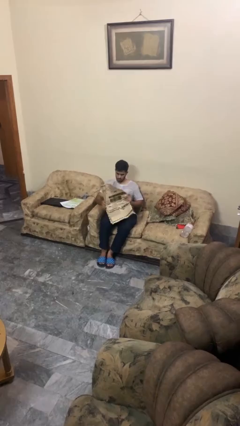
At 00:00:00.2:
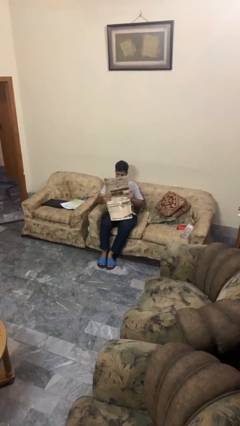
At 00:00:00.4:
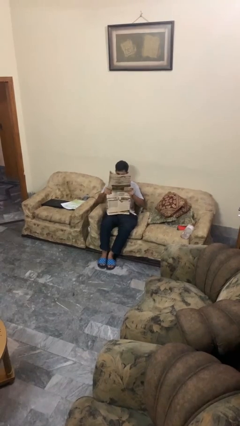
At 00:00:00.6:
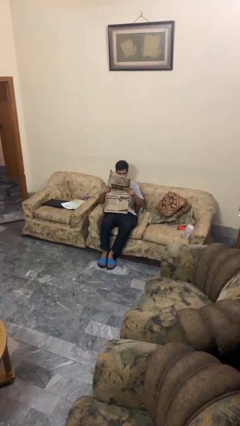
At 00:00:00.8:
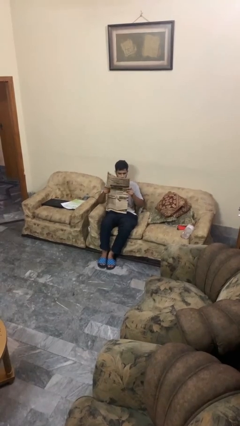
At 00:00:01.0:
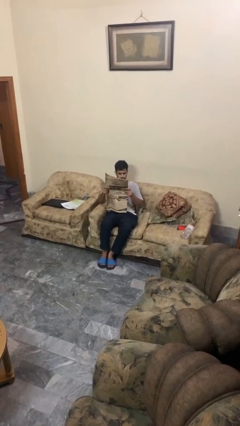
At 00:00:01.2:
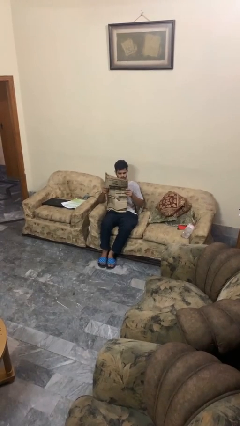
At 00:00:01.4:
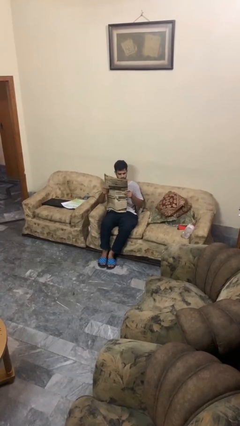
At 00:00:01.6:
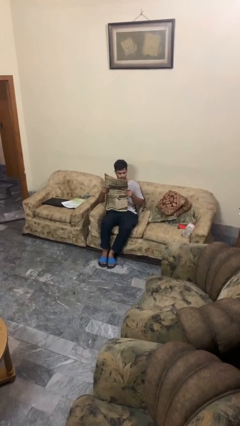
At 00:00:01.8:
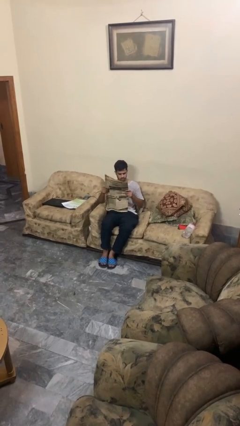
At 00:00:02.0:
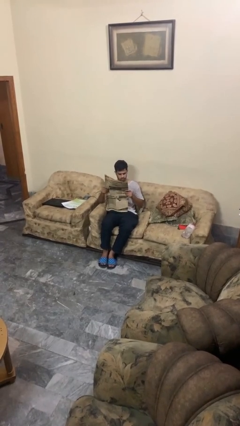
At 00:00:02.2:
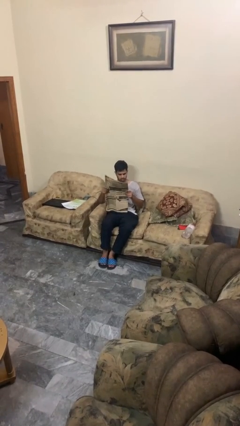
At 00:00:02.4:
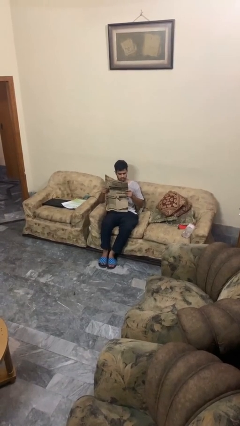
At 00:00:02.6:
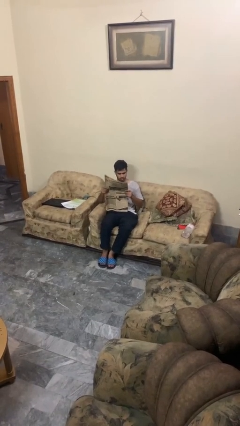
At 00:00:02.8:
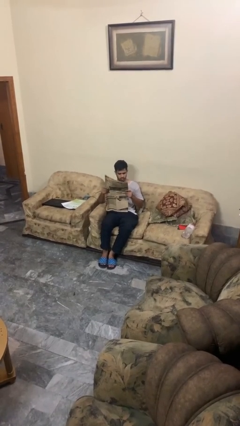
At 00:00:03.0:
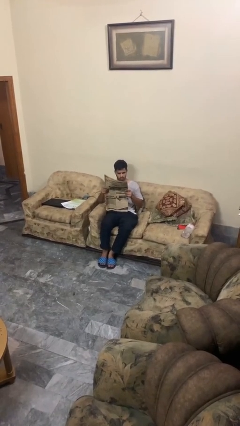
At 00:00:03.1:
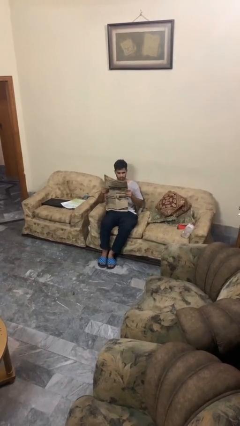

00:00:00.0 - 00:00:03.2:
person reads newspaper

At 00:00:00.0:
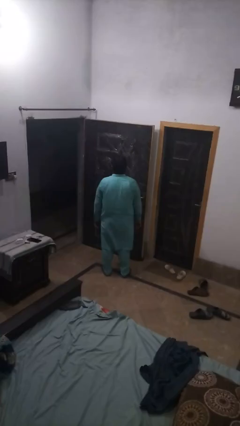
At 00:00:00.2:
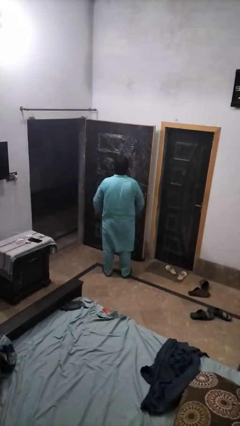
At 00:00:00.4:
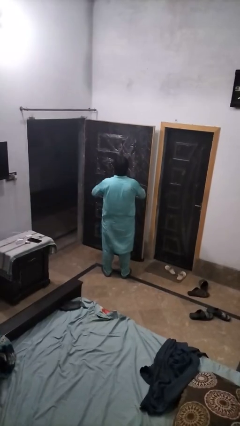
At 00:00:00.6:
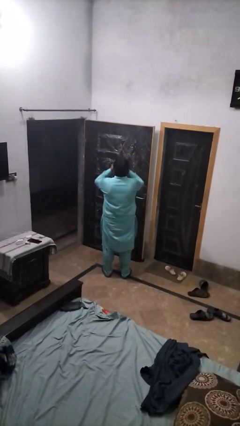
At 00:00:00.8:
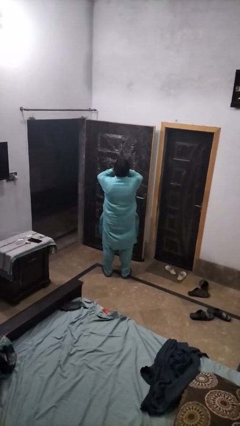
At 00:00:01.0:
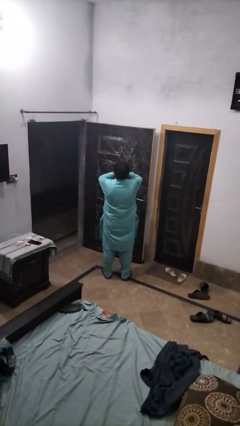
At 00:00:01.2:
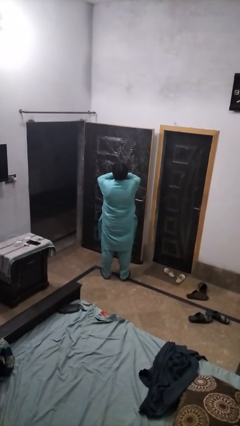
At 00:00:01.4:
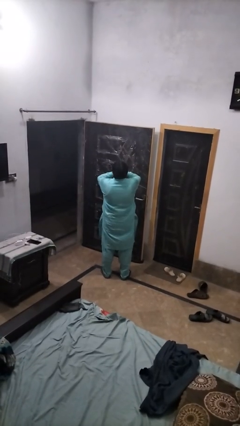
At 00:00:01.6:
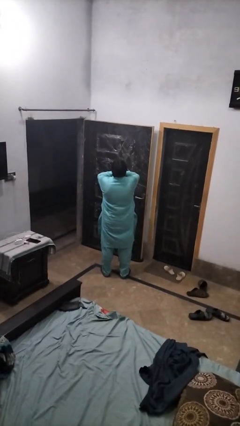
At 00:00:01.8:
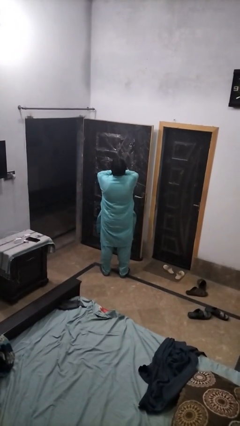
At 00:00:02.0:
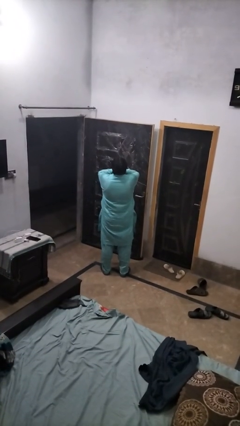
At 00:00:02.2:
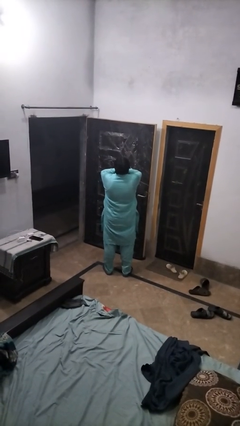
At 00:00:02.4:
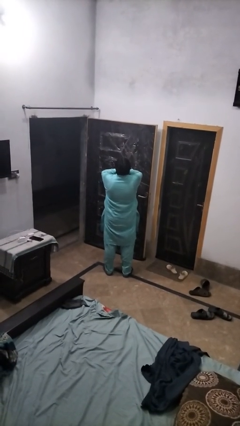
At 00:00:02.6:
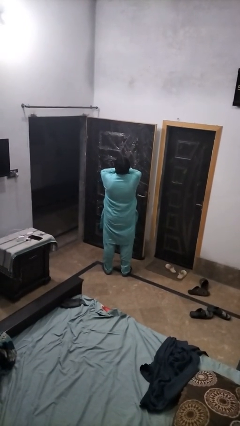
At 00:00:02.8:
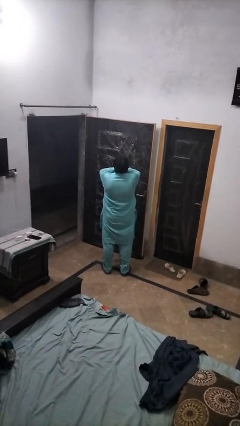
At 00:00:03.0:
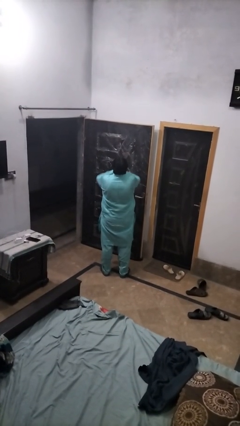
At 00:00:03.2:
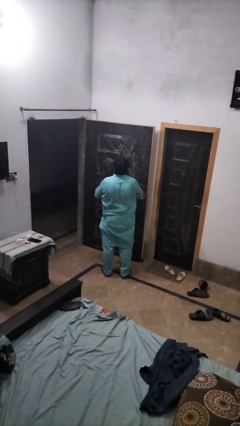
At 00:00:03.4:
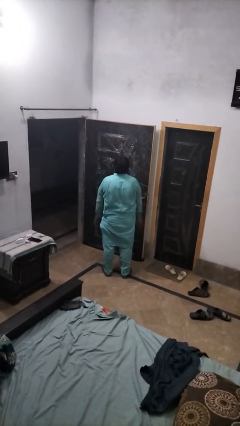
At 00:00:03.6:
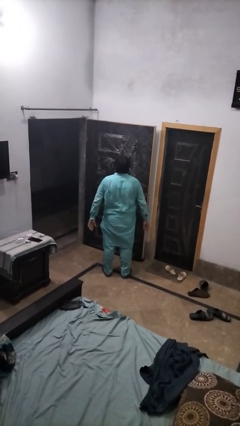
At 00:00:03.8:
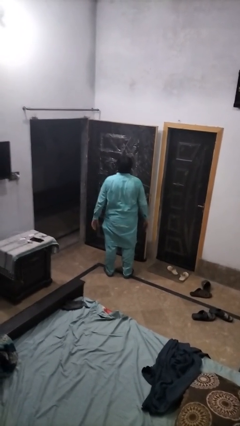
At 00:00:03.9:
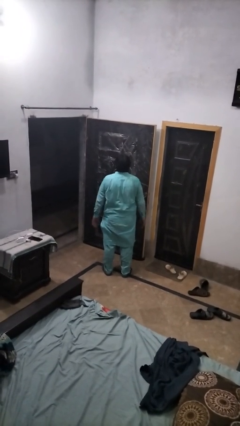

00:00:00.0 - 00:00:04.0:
person yawns

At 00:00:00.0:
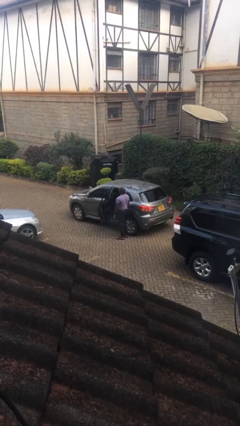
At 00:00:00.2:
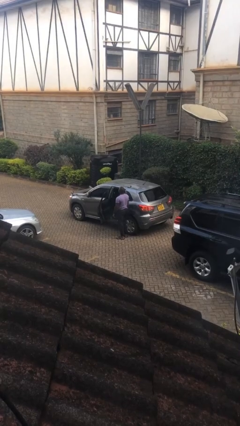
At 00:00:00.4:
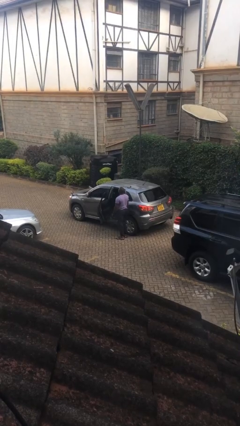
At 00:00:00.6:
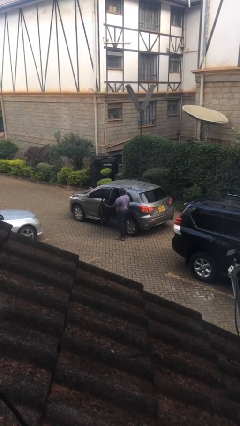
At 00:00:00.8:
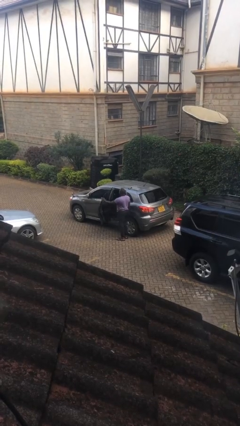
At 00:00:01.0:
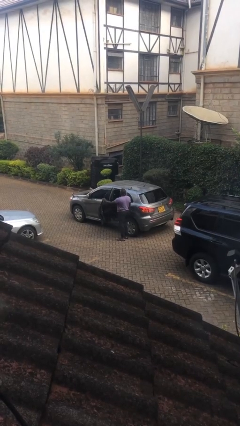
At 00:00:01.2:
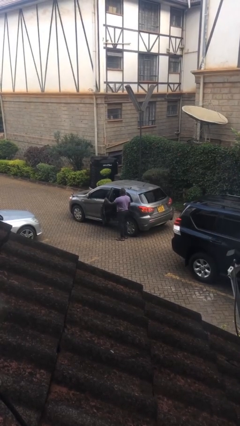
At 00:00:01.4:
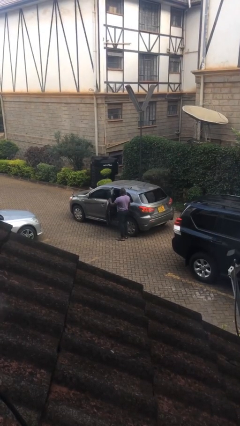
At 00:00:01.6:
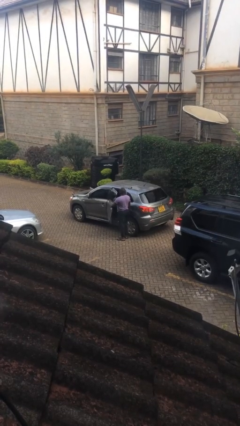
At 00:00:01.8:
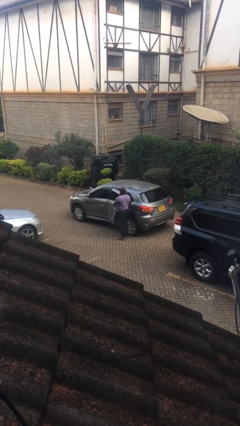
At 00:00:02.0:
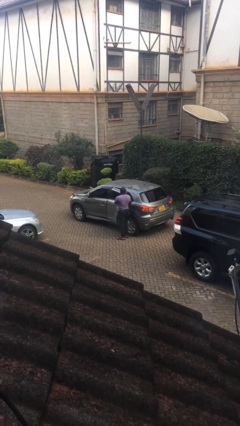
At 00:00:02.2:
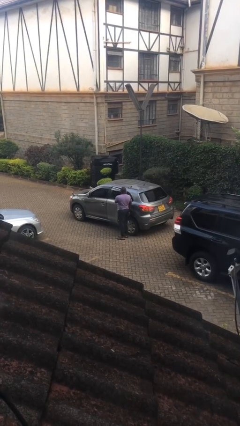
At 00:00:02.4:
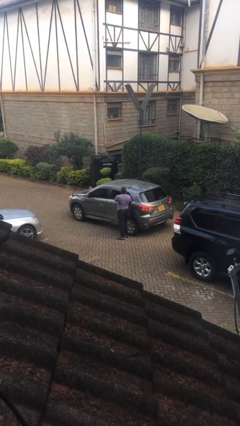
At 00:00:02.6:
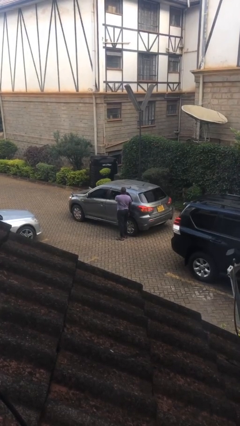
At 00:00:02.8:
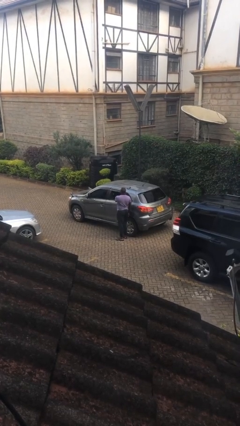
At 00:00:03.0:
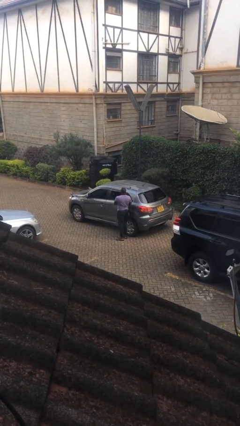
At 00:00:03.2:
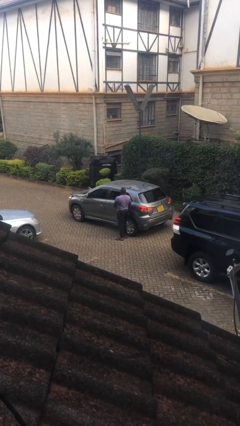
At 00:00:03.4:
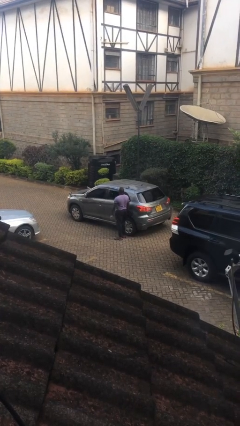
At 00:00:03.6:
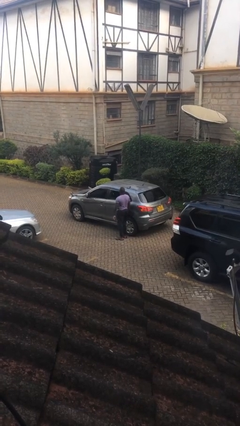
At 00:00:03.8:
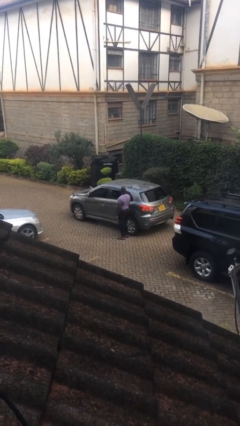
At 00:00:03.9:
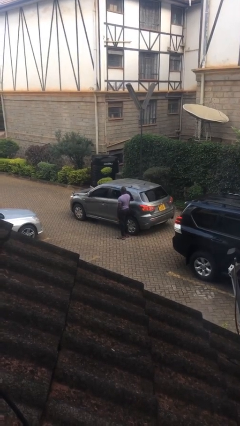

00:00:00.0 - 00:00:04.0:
person closes car door

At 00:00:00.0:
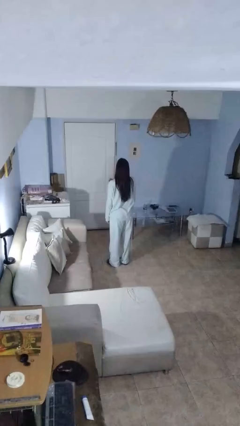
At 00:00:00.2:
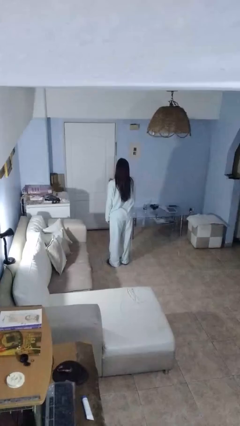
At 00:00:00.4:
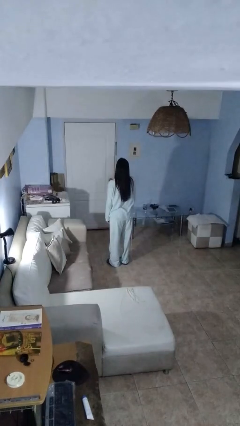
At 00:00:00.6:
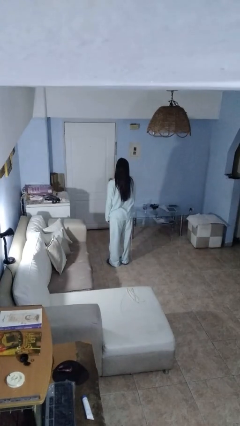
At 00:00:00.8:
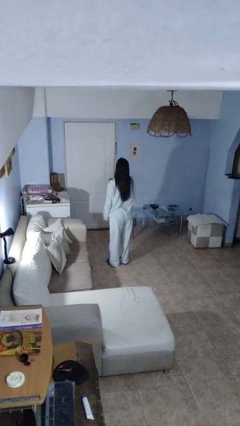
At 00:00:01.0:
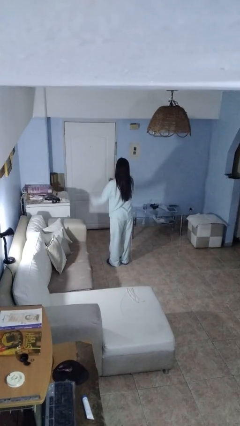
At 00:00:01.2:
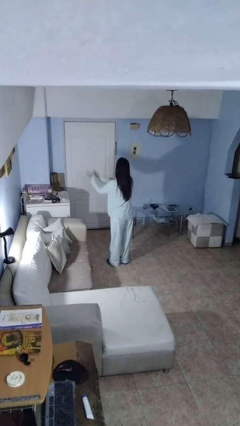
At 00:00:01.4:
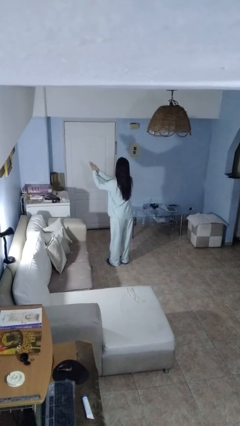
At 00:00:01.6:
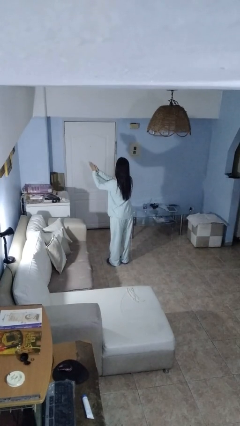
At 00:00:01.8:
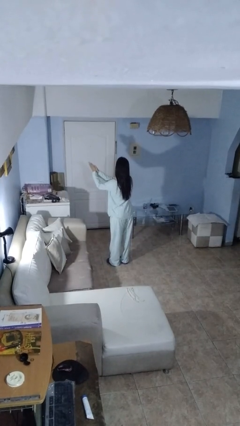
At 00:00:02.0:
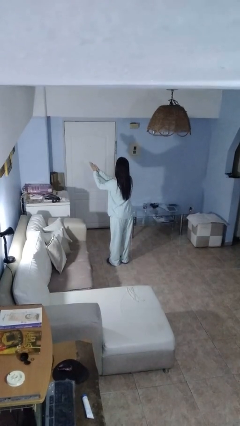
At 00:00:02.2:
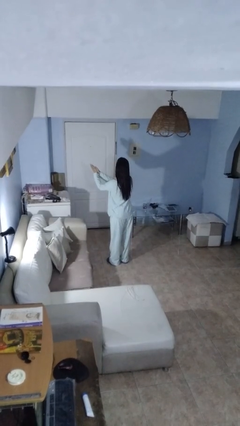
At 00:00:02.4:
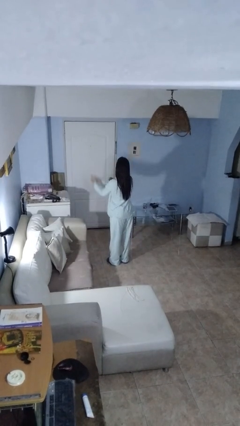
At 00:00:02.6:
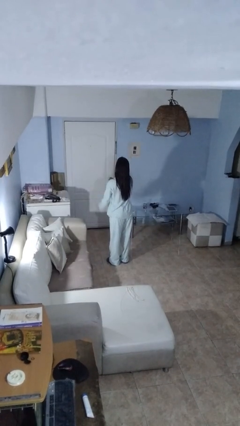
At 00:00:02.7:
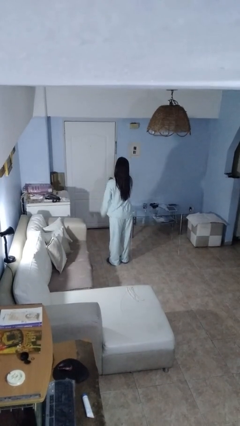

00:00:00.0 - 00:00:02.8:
person claps hands

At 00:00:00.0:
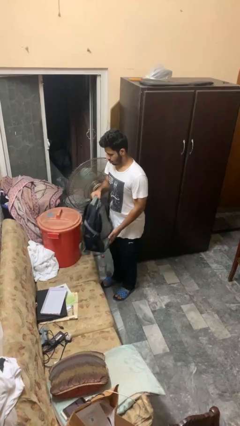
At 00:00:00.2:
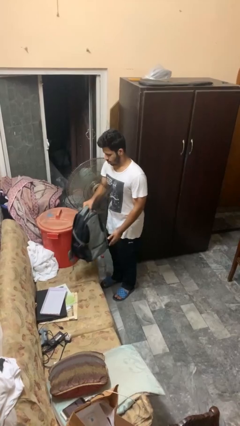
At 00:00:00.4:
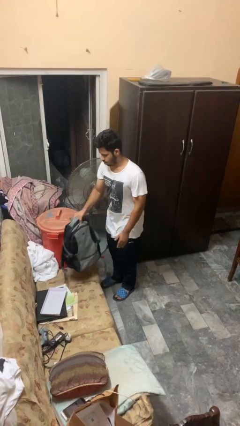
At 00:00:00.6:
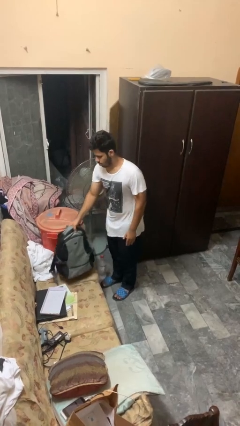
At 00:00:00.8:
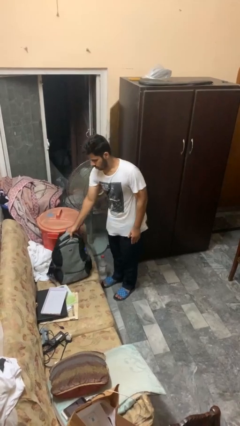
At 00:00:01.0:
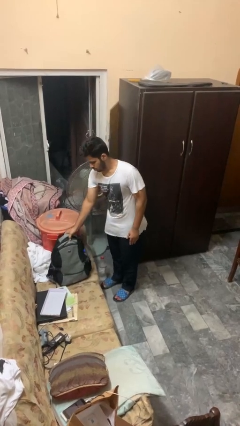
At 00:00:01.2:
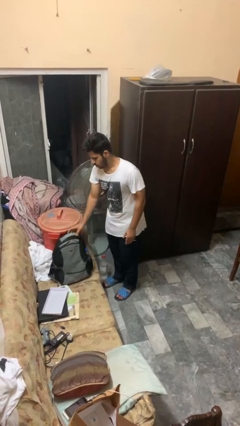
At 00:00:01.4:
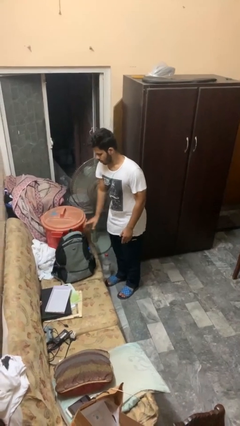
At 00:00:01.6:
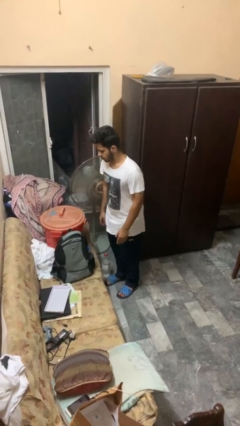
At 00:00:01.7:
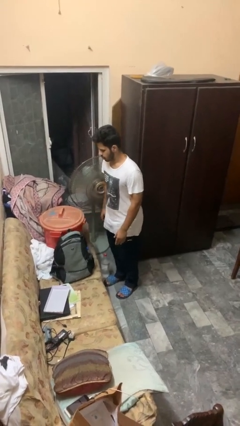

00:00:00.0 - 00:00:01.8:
person puts down object on couch

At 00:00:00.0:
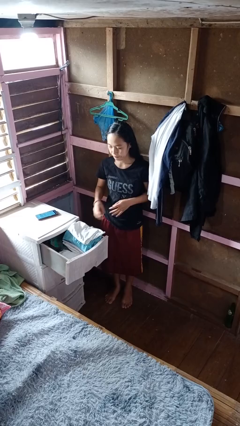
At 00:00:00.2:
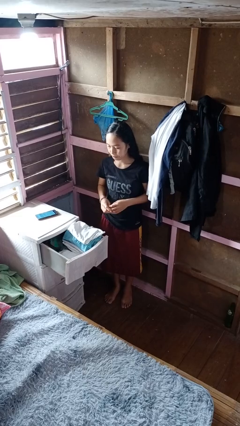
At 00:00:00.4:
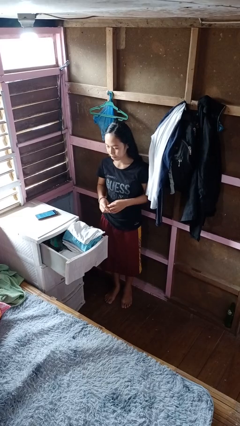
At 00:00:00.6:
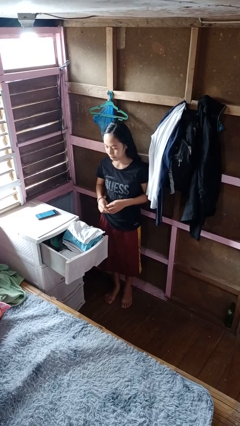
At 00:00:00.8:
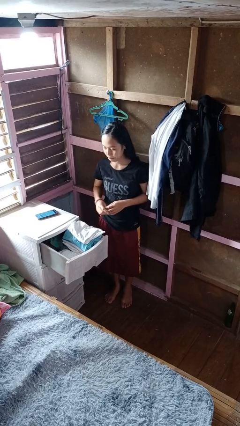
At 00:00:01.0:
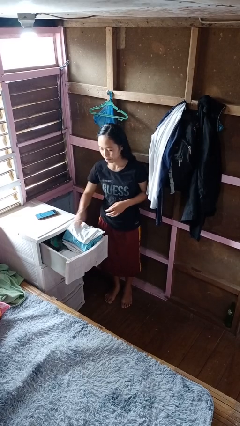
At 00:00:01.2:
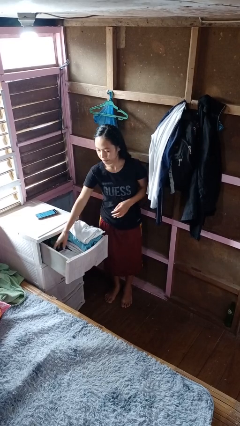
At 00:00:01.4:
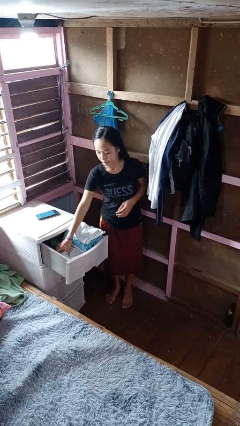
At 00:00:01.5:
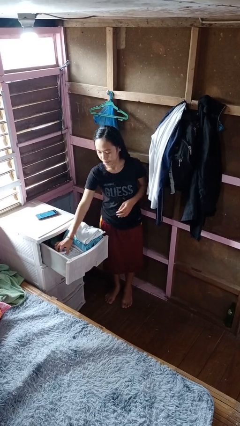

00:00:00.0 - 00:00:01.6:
person puts clothes into dresser
